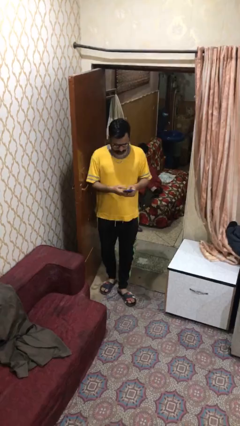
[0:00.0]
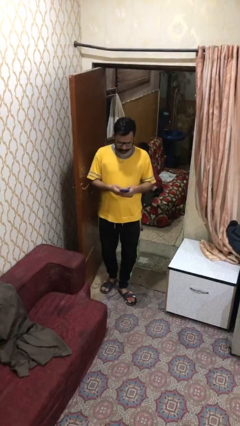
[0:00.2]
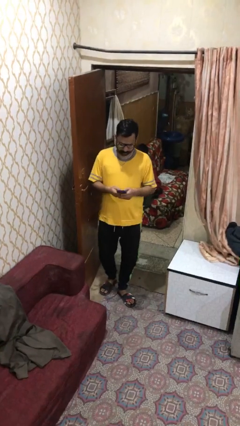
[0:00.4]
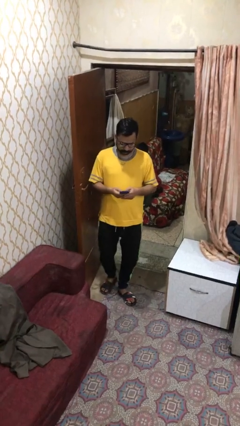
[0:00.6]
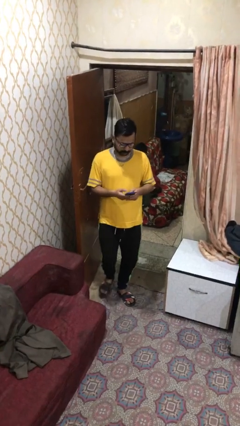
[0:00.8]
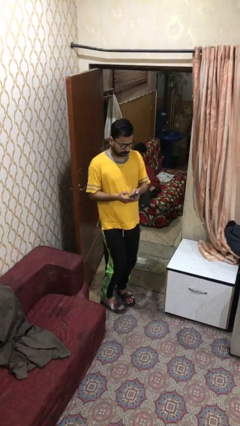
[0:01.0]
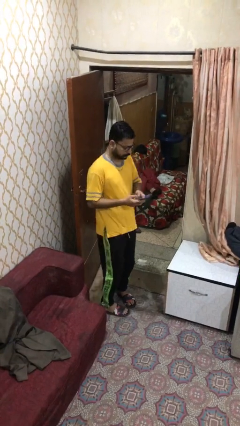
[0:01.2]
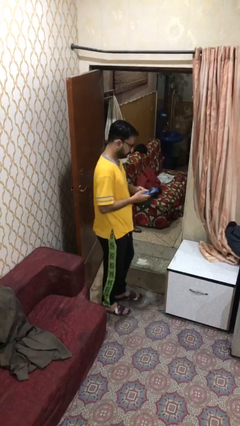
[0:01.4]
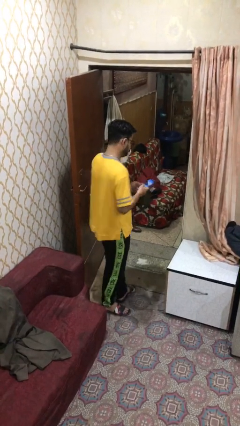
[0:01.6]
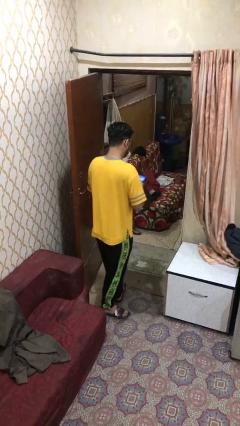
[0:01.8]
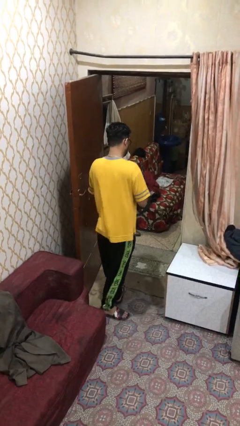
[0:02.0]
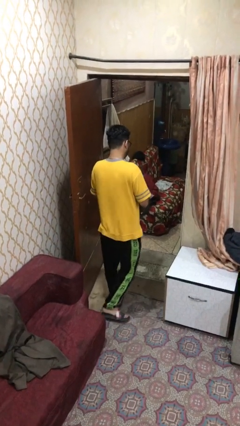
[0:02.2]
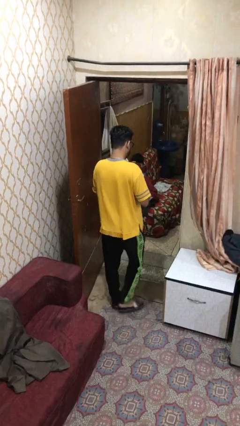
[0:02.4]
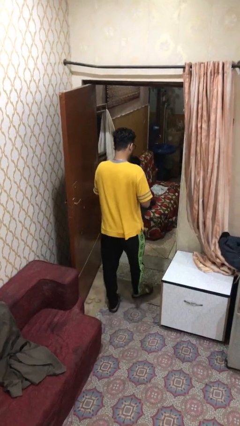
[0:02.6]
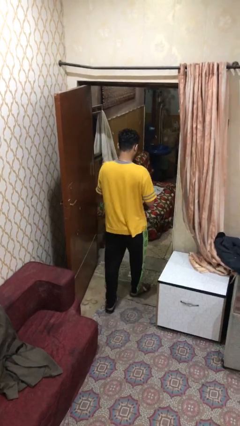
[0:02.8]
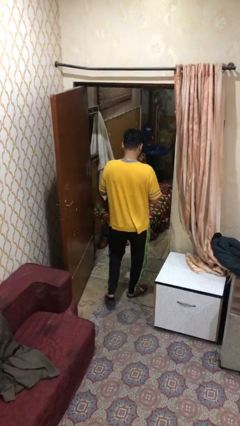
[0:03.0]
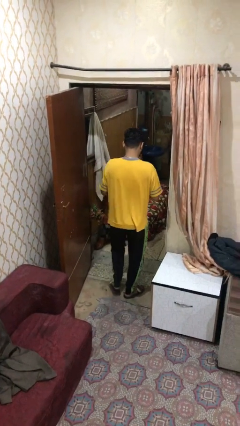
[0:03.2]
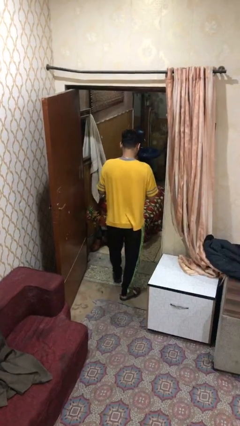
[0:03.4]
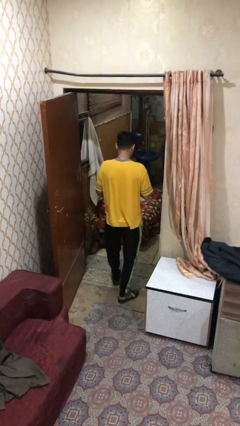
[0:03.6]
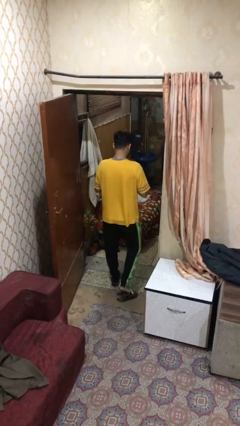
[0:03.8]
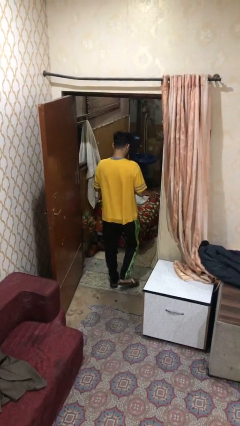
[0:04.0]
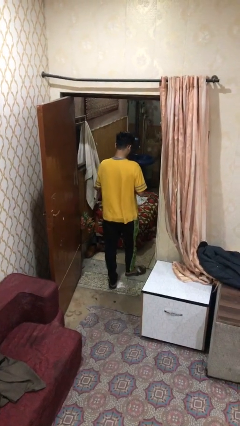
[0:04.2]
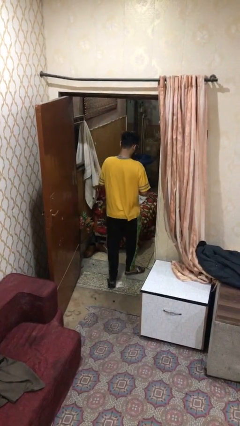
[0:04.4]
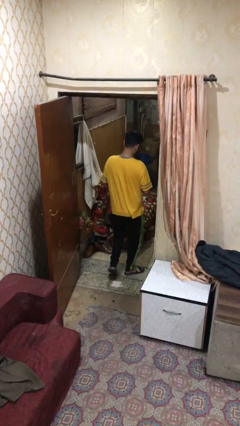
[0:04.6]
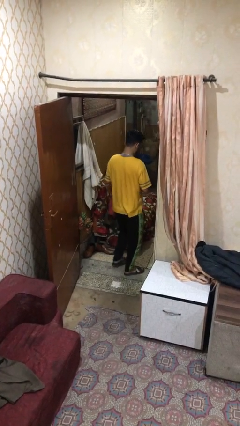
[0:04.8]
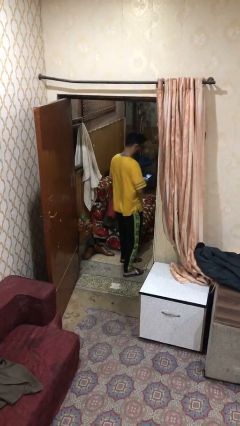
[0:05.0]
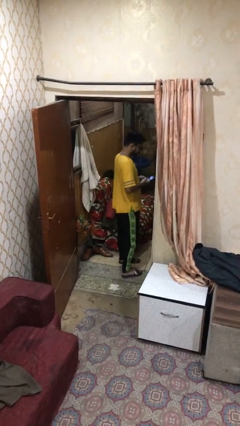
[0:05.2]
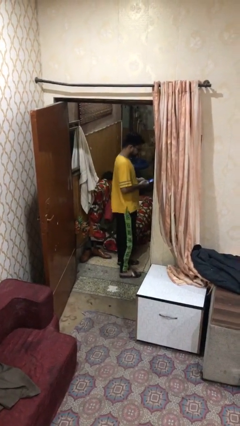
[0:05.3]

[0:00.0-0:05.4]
person exits scene through structure

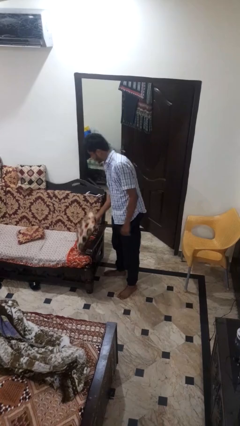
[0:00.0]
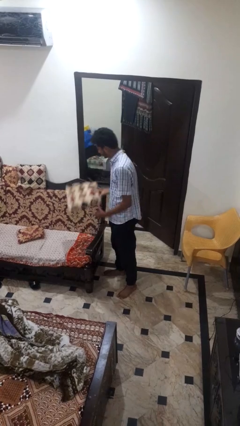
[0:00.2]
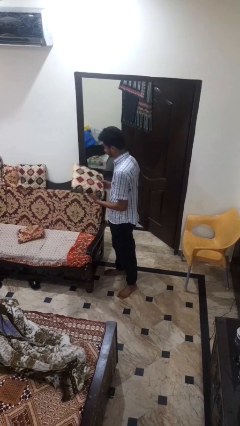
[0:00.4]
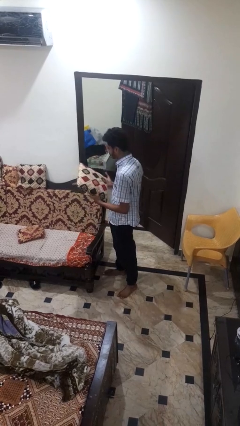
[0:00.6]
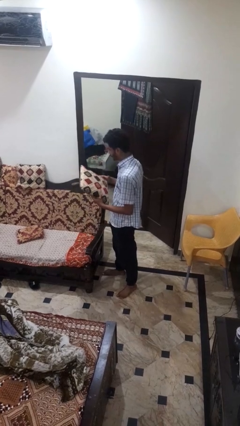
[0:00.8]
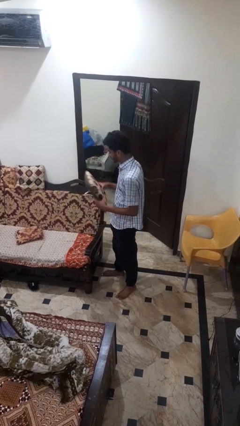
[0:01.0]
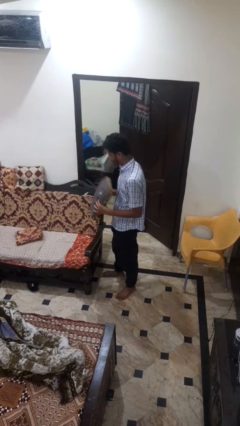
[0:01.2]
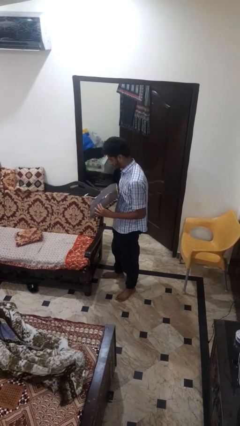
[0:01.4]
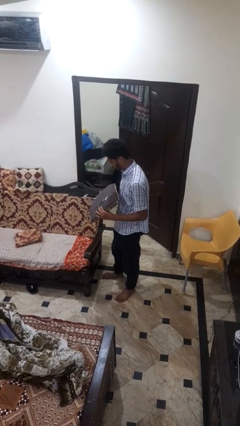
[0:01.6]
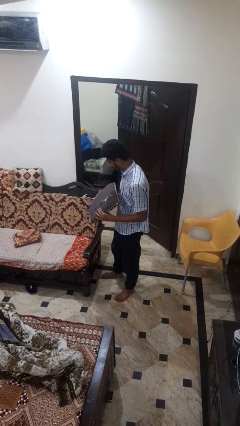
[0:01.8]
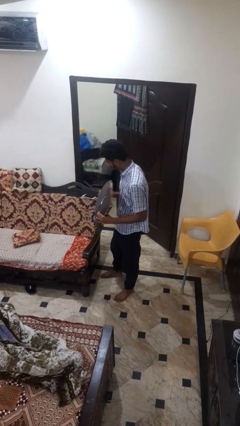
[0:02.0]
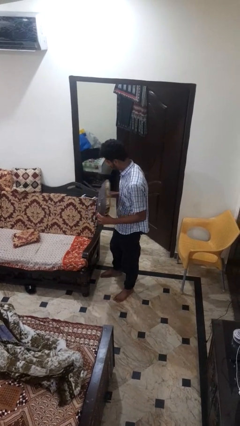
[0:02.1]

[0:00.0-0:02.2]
person picks up object from couch

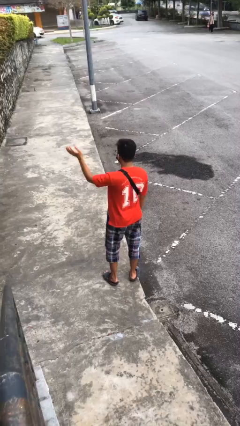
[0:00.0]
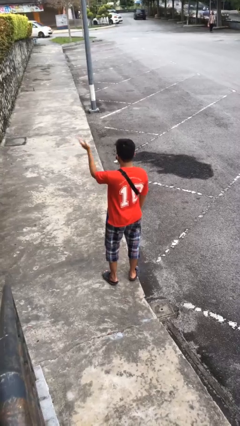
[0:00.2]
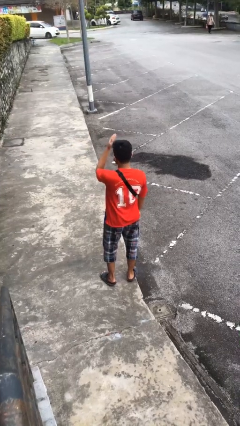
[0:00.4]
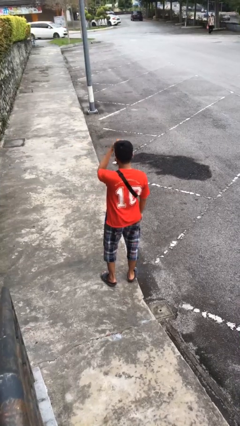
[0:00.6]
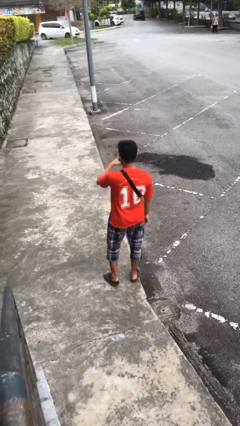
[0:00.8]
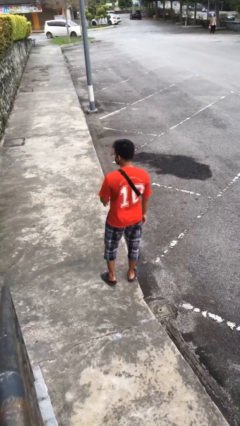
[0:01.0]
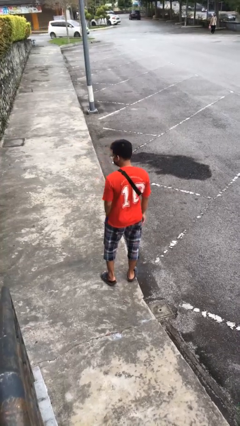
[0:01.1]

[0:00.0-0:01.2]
person gestures swipe right

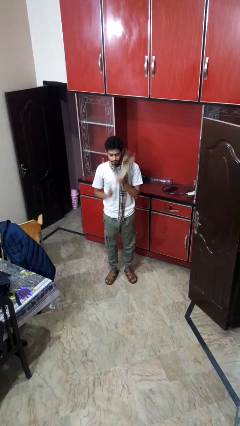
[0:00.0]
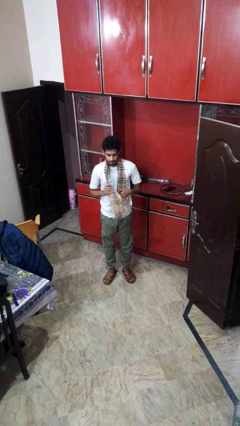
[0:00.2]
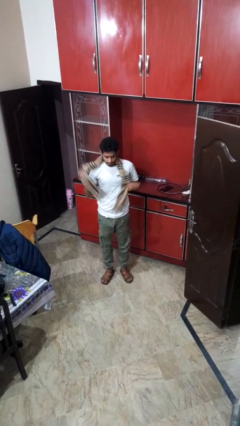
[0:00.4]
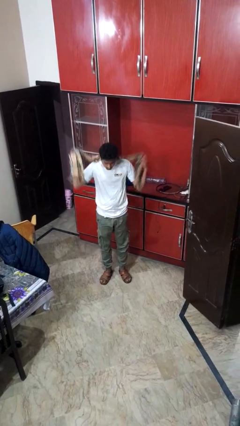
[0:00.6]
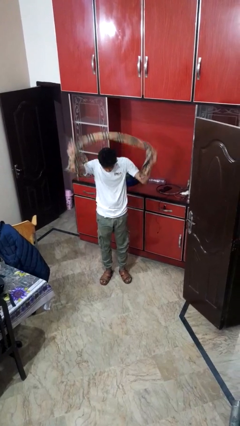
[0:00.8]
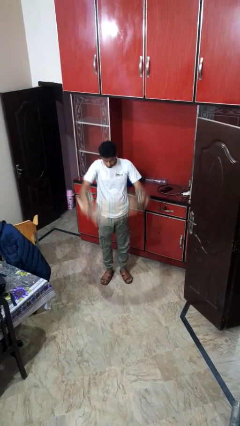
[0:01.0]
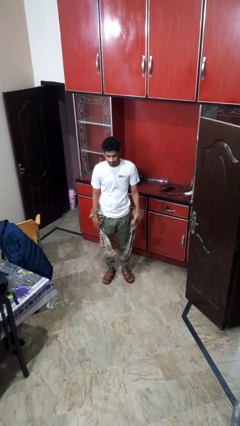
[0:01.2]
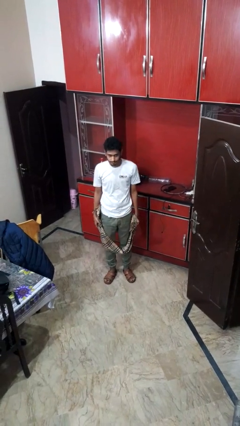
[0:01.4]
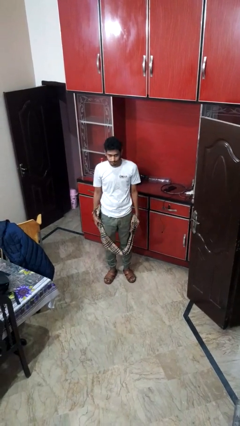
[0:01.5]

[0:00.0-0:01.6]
person takes off scarf

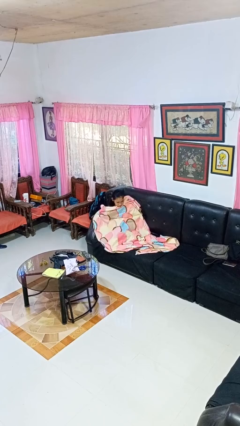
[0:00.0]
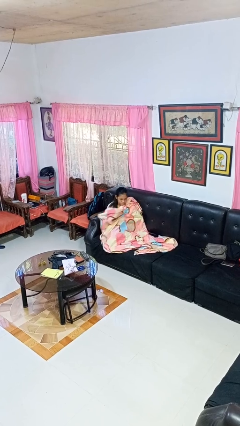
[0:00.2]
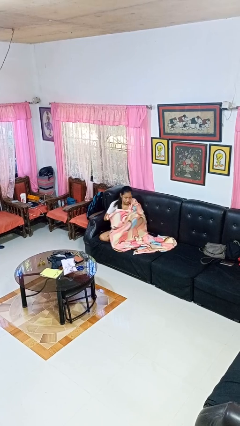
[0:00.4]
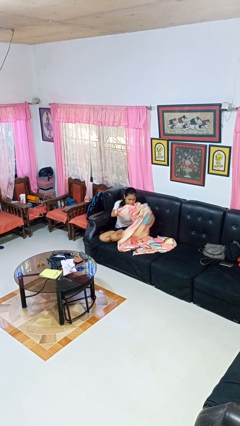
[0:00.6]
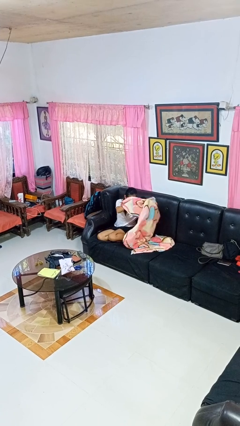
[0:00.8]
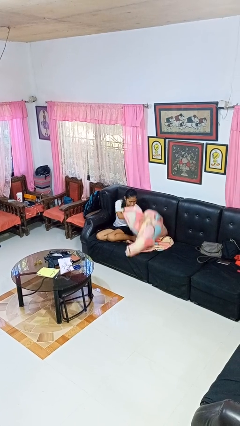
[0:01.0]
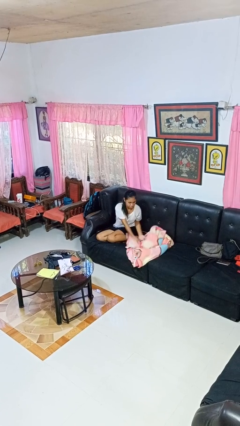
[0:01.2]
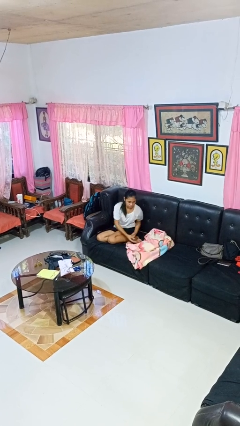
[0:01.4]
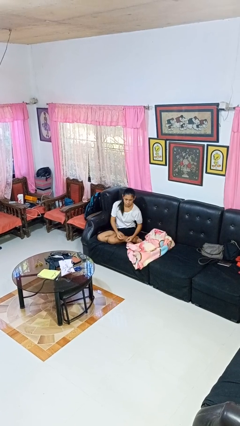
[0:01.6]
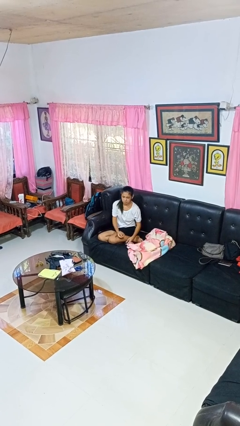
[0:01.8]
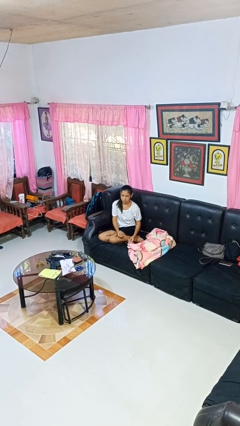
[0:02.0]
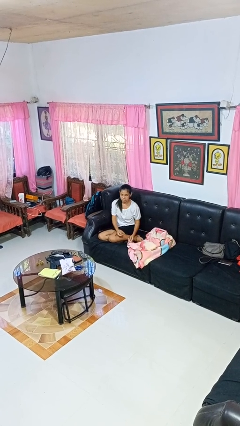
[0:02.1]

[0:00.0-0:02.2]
person uncovers with blanket

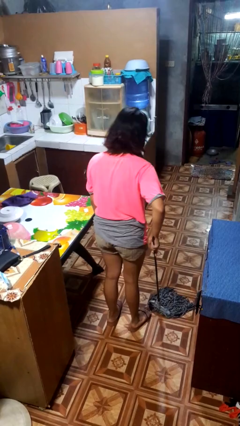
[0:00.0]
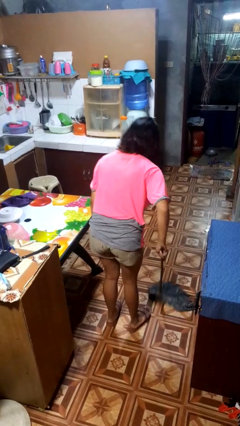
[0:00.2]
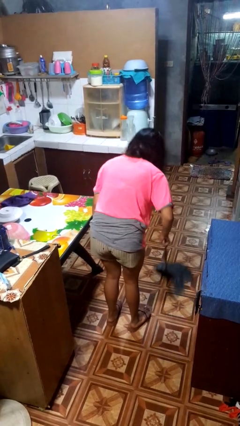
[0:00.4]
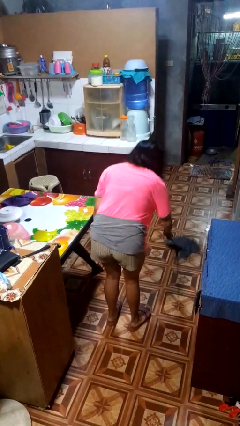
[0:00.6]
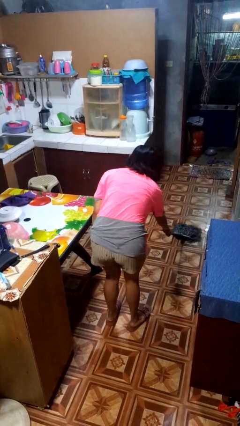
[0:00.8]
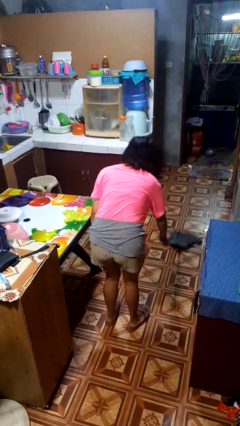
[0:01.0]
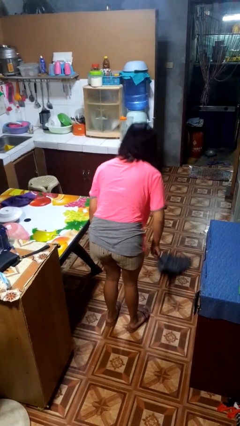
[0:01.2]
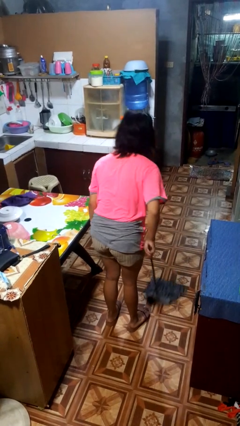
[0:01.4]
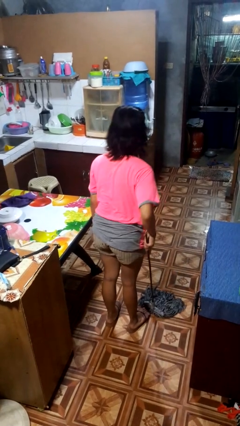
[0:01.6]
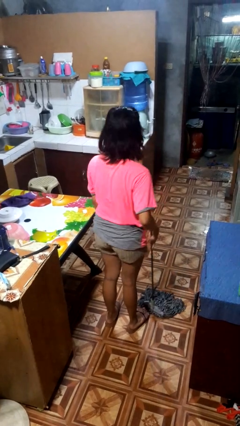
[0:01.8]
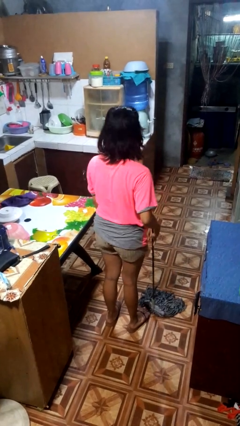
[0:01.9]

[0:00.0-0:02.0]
person mops

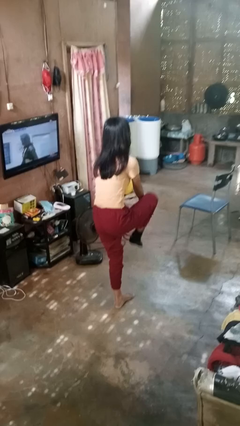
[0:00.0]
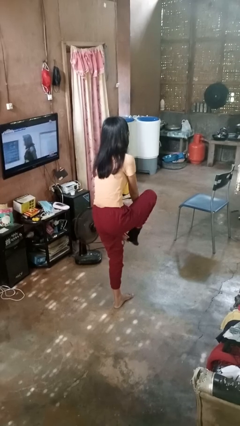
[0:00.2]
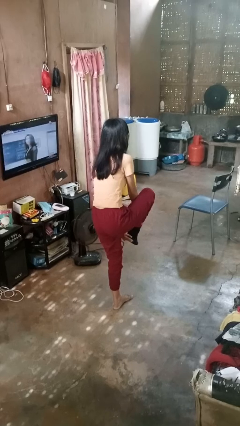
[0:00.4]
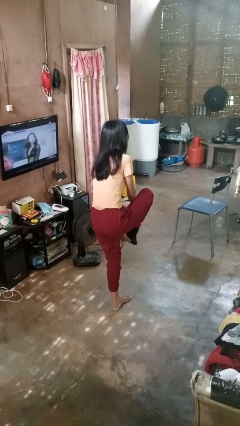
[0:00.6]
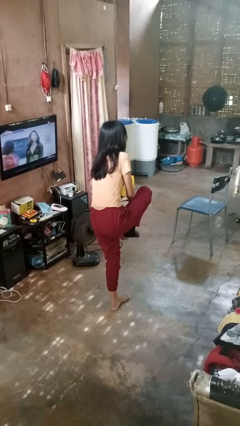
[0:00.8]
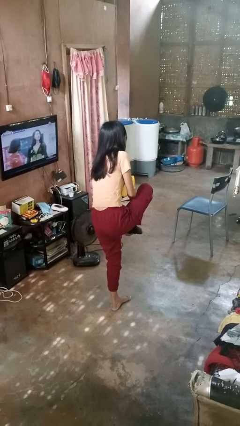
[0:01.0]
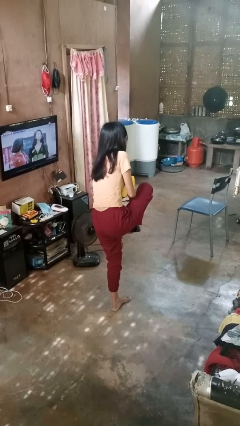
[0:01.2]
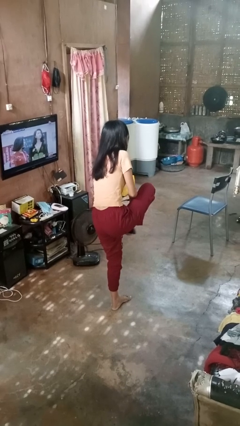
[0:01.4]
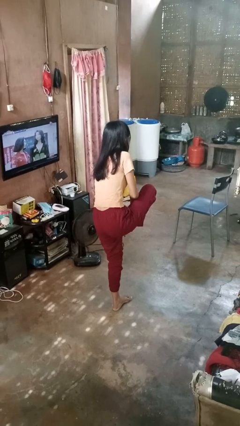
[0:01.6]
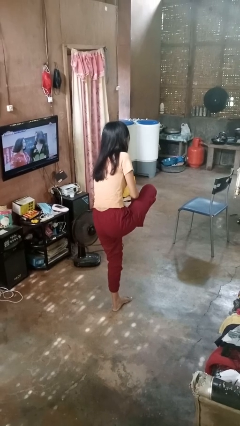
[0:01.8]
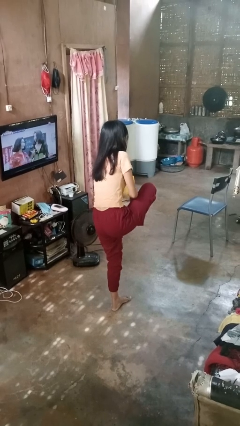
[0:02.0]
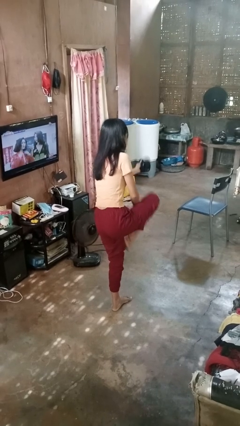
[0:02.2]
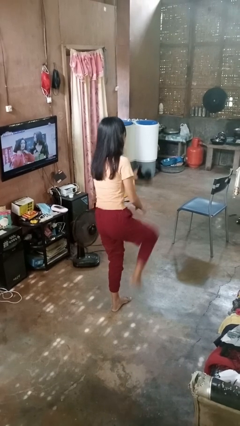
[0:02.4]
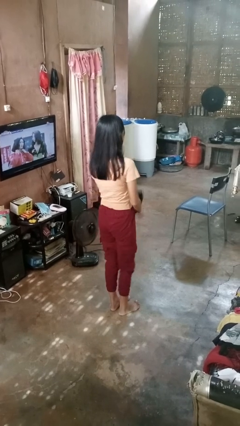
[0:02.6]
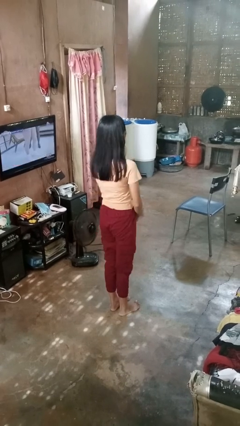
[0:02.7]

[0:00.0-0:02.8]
person takes off socks
